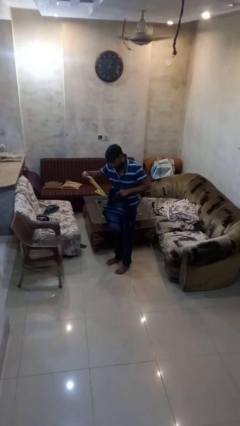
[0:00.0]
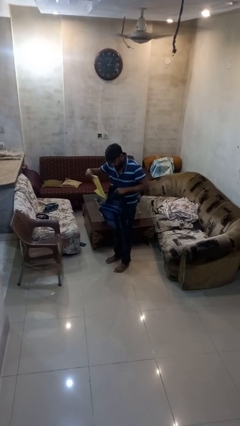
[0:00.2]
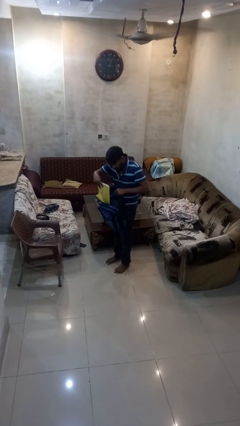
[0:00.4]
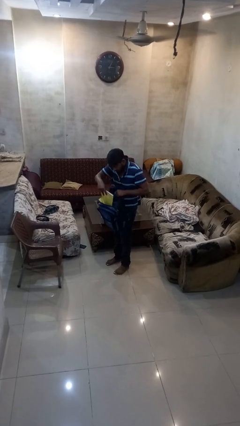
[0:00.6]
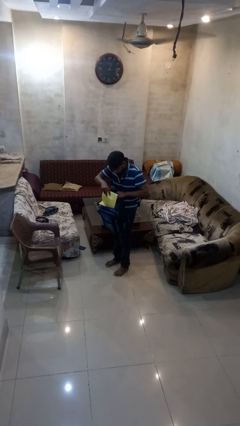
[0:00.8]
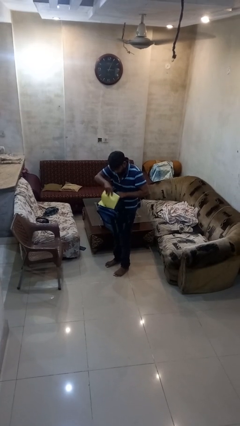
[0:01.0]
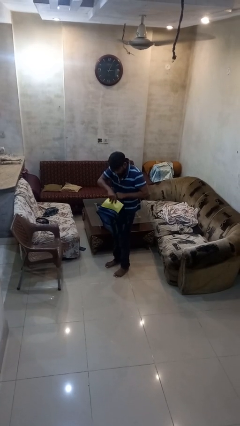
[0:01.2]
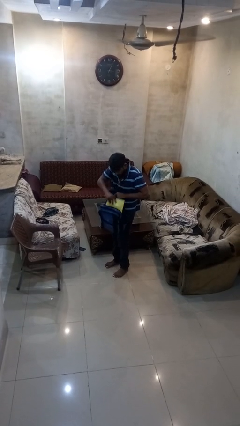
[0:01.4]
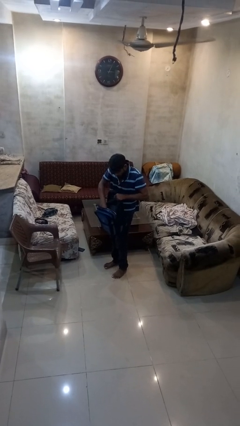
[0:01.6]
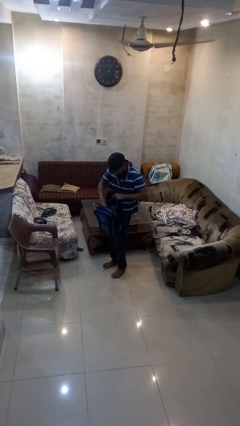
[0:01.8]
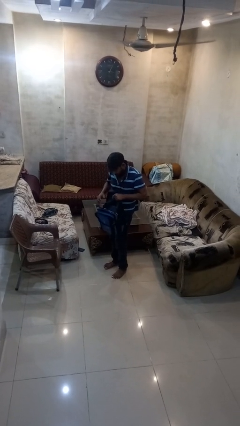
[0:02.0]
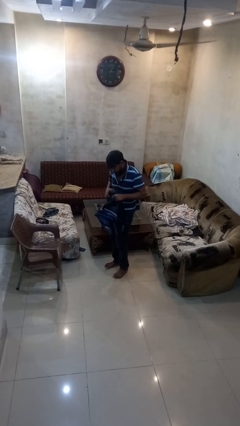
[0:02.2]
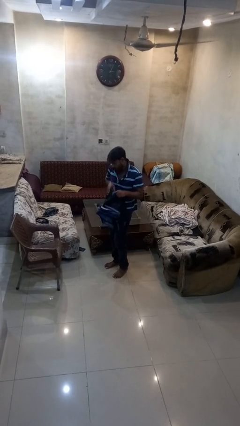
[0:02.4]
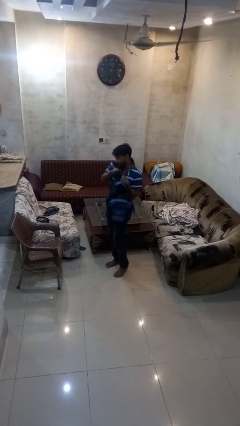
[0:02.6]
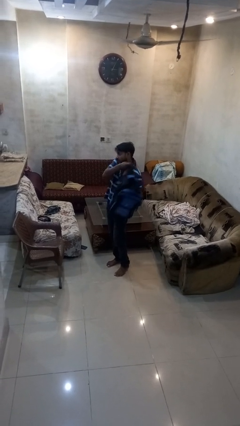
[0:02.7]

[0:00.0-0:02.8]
person puts object into backpack

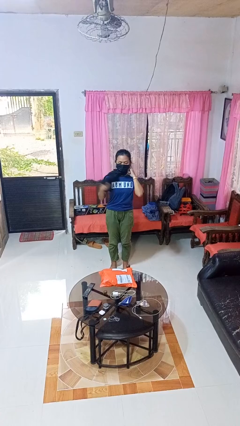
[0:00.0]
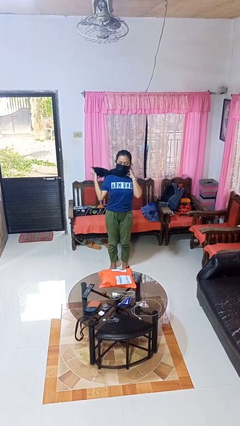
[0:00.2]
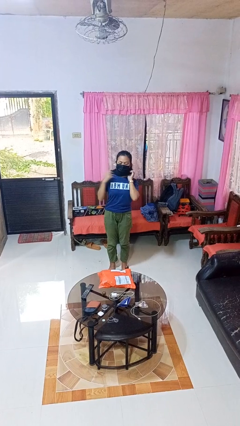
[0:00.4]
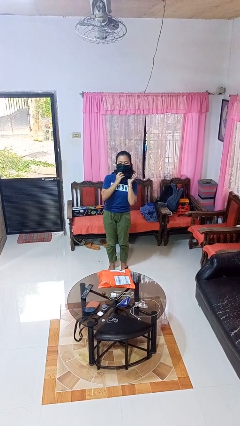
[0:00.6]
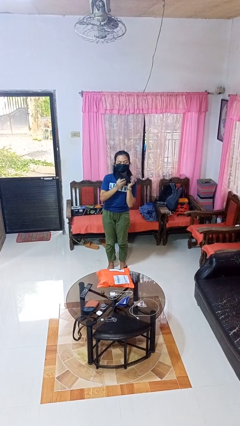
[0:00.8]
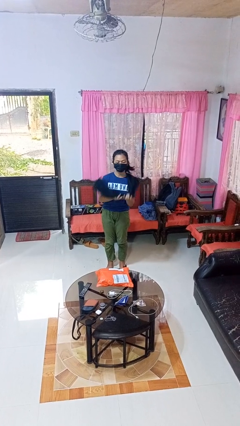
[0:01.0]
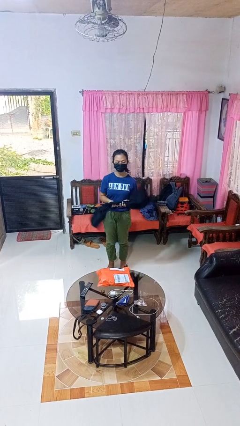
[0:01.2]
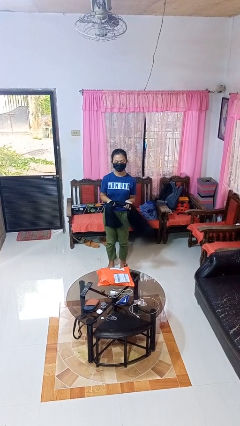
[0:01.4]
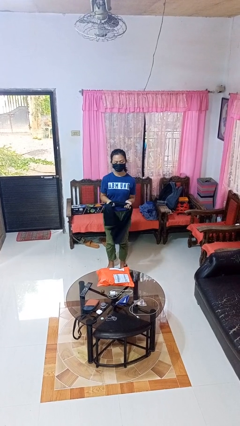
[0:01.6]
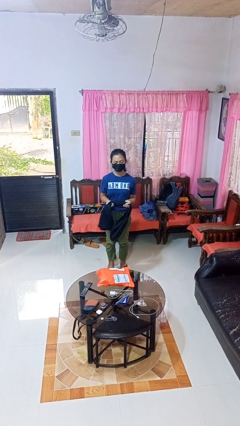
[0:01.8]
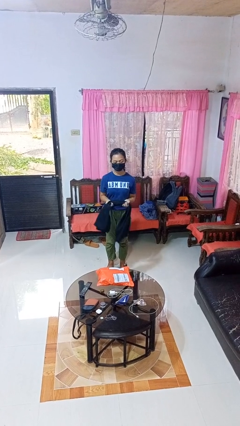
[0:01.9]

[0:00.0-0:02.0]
person takes off scarf

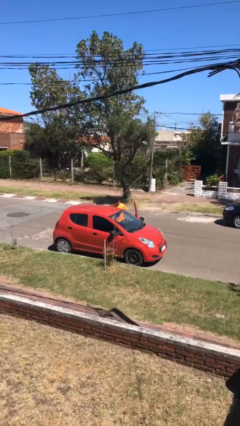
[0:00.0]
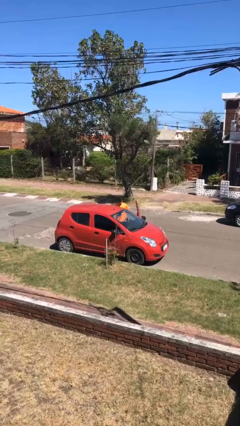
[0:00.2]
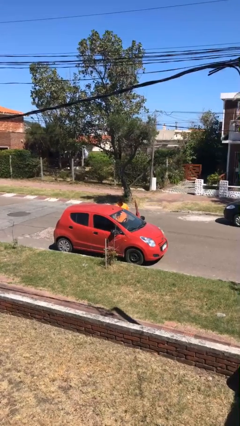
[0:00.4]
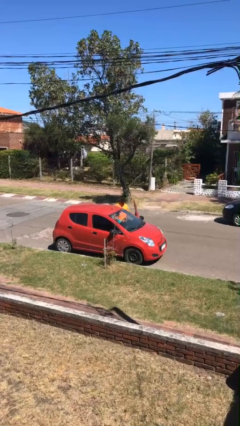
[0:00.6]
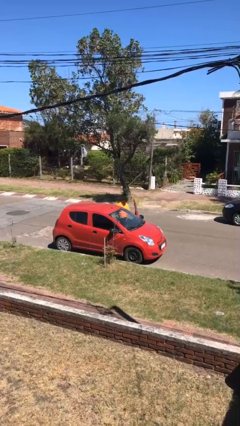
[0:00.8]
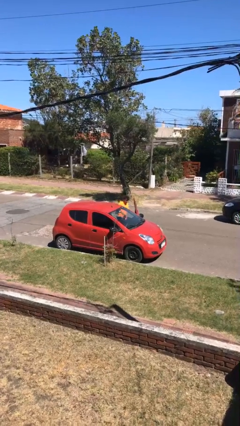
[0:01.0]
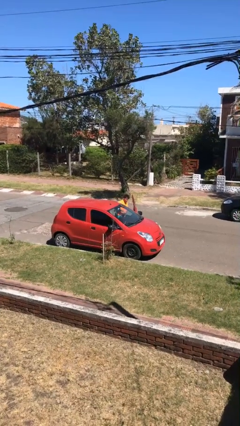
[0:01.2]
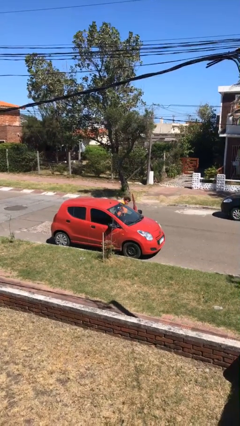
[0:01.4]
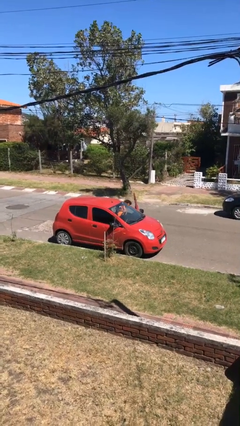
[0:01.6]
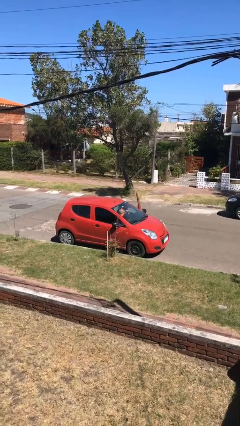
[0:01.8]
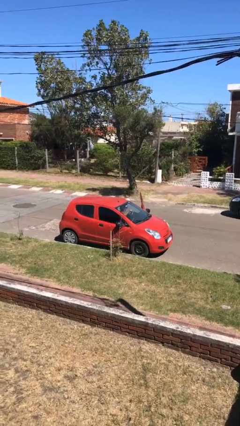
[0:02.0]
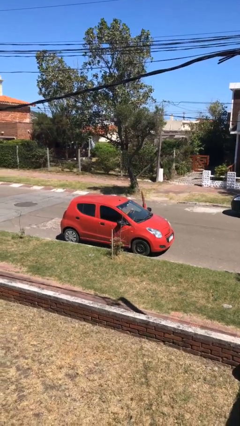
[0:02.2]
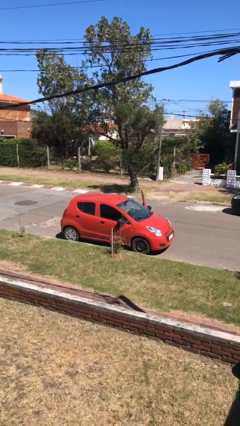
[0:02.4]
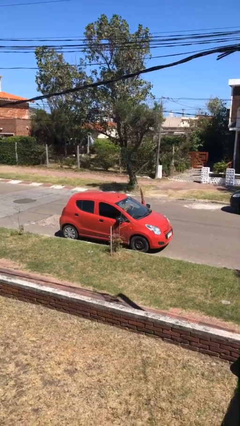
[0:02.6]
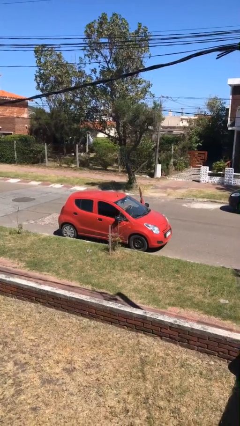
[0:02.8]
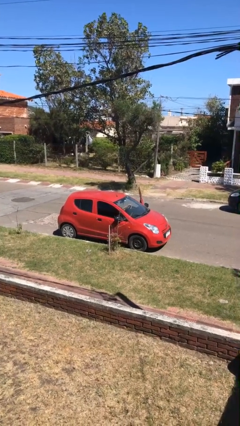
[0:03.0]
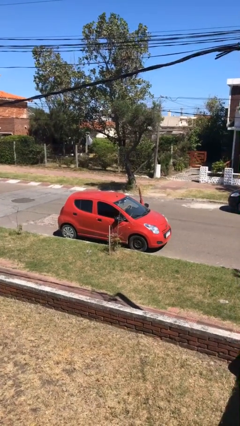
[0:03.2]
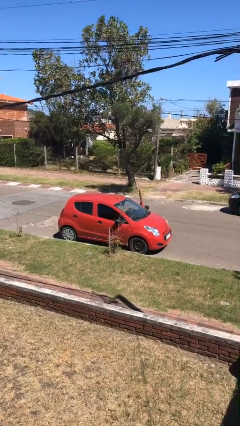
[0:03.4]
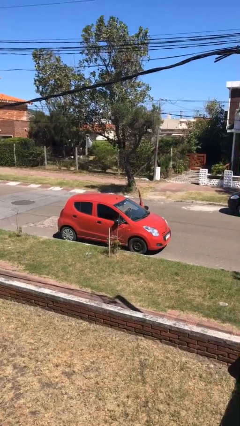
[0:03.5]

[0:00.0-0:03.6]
person enters car

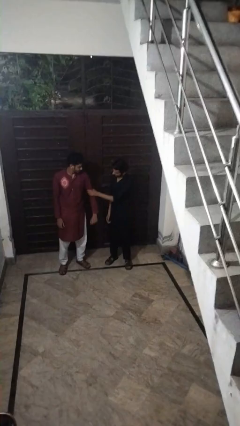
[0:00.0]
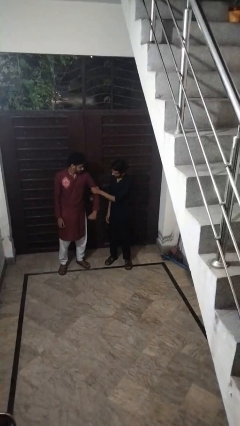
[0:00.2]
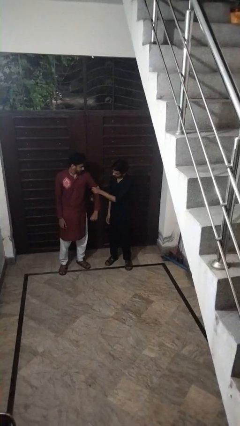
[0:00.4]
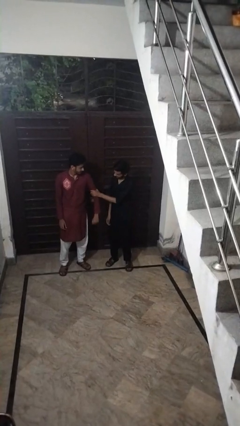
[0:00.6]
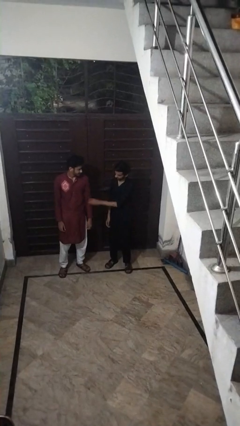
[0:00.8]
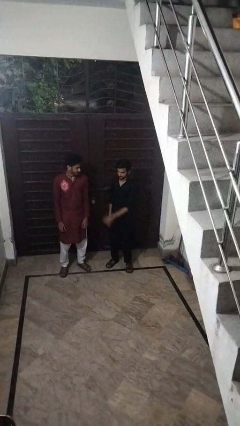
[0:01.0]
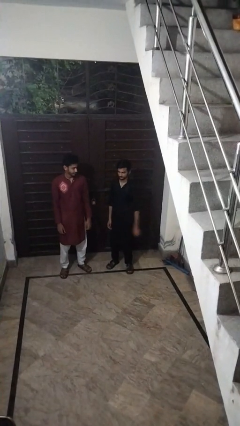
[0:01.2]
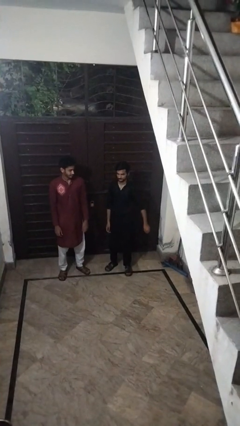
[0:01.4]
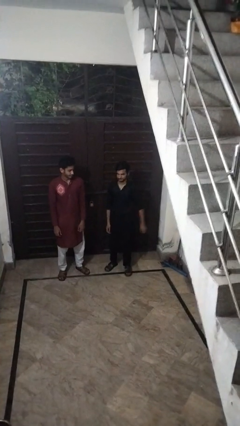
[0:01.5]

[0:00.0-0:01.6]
person grabs person by bicep

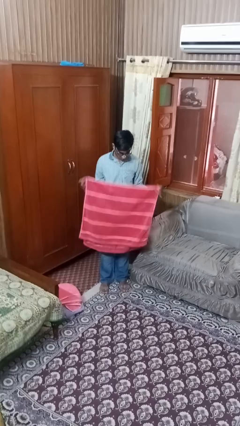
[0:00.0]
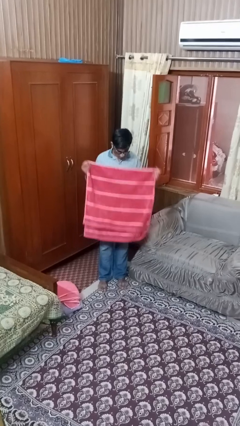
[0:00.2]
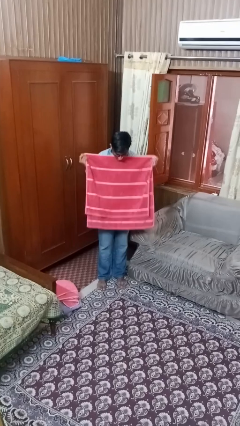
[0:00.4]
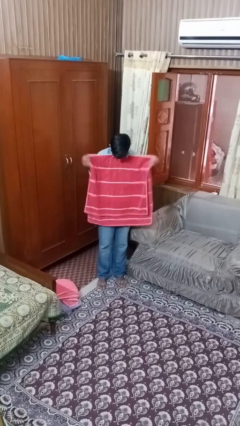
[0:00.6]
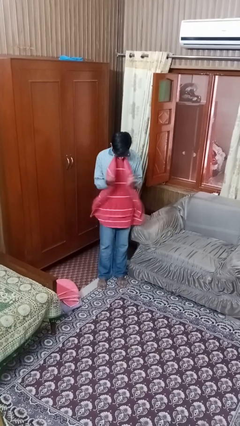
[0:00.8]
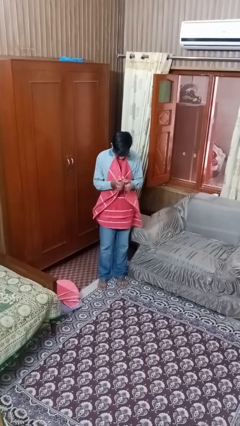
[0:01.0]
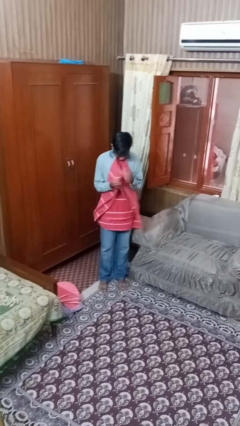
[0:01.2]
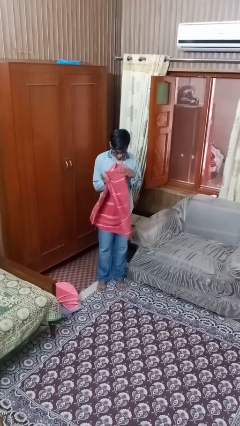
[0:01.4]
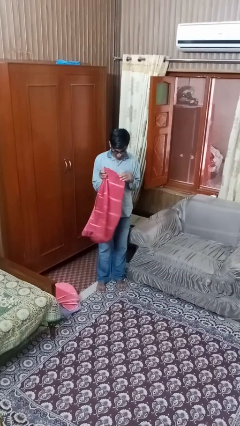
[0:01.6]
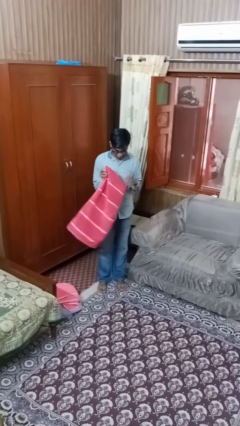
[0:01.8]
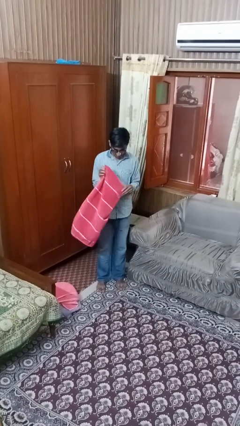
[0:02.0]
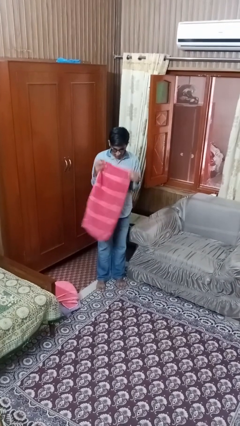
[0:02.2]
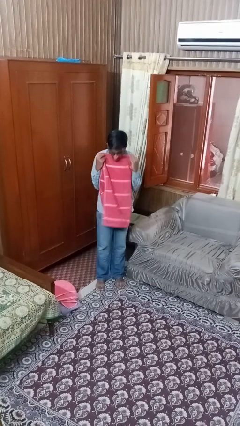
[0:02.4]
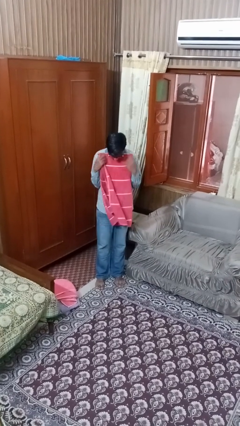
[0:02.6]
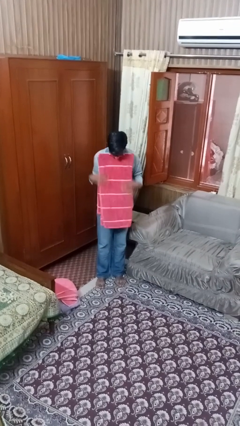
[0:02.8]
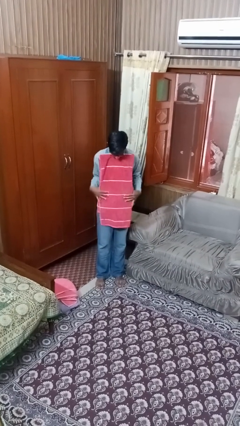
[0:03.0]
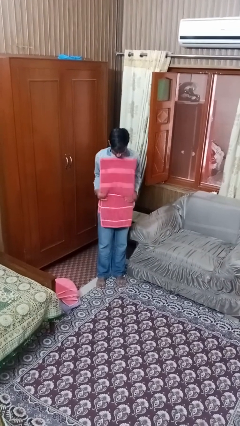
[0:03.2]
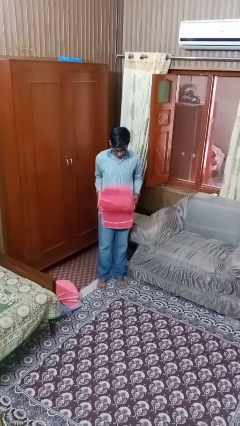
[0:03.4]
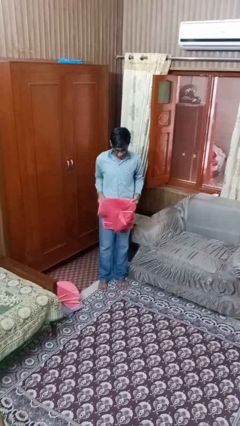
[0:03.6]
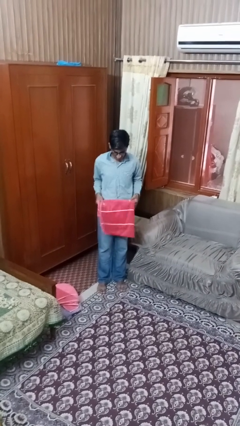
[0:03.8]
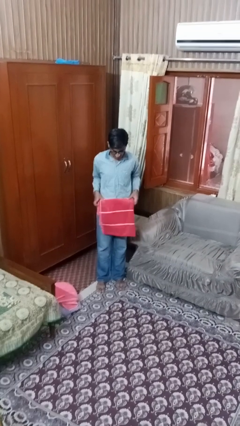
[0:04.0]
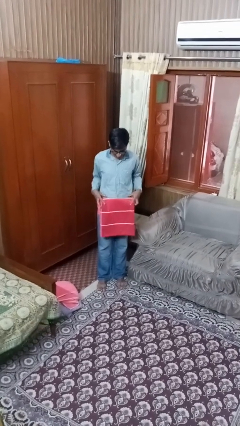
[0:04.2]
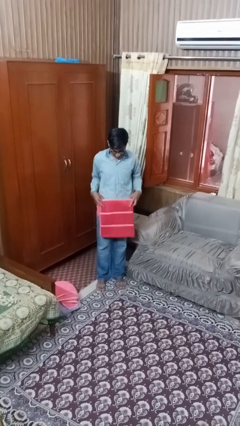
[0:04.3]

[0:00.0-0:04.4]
person folds towel

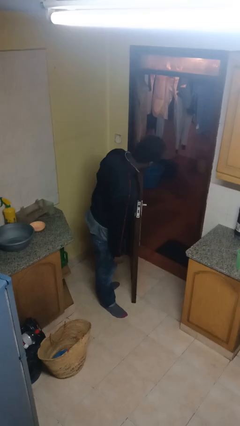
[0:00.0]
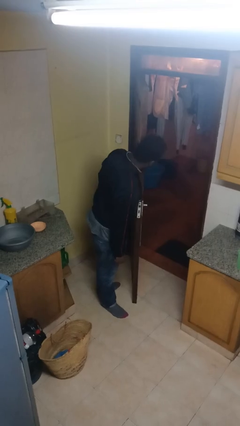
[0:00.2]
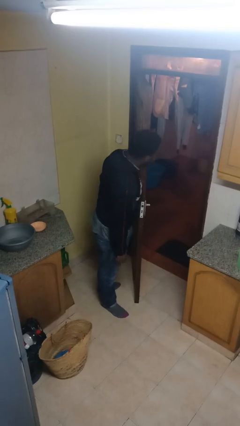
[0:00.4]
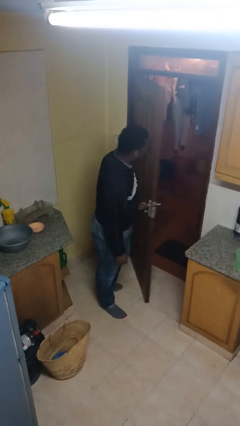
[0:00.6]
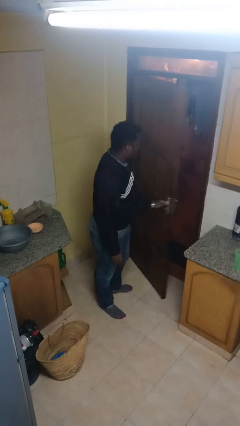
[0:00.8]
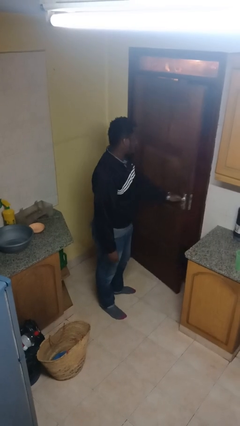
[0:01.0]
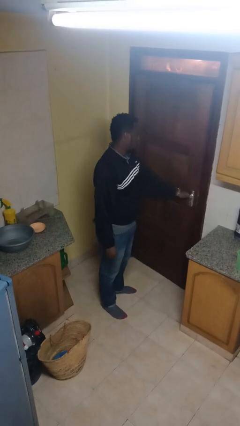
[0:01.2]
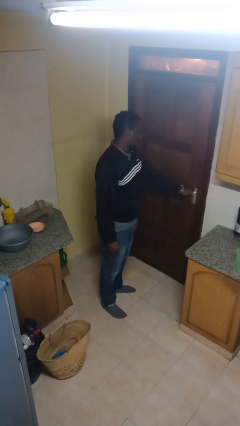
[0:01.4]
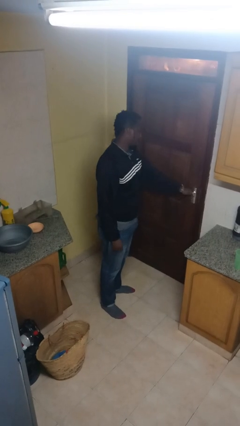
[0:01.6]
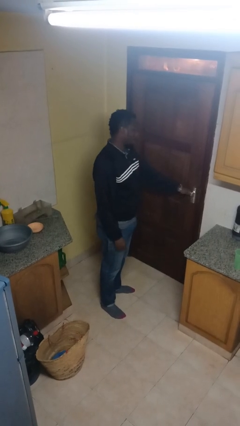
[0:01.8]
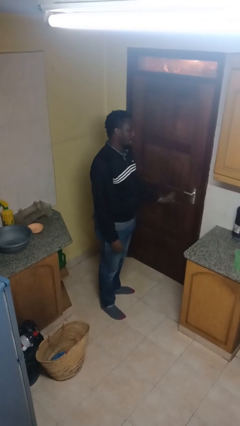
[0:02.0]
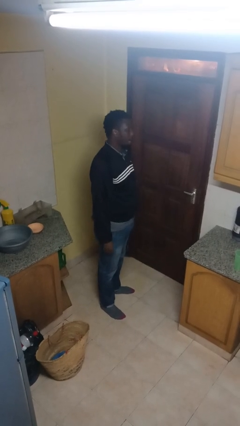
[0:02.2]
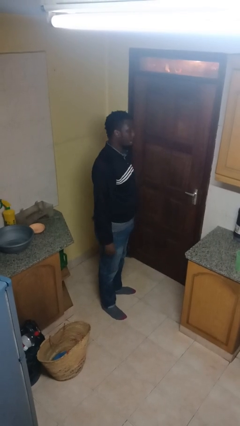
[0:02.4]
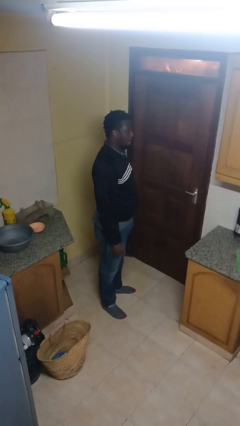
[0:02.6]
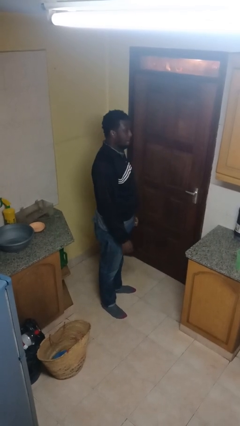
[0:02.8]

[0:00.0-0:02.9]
person closes facility door

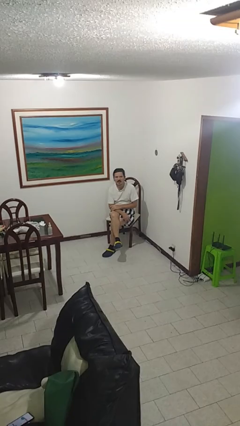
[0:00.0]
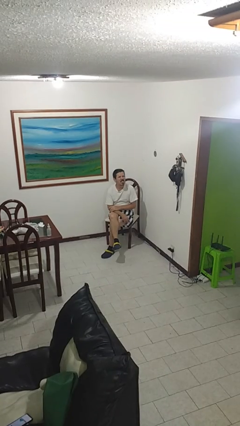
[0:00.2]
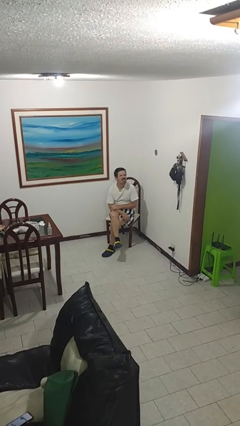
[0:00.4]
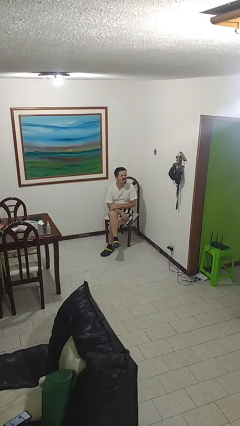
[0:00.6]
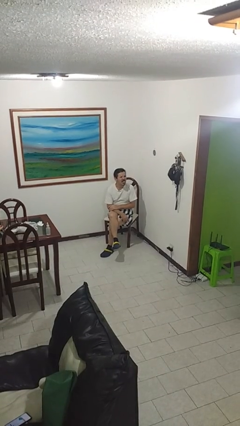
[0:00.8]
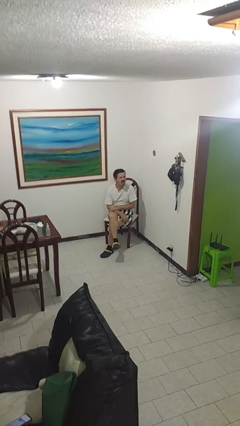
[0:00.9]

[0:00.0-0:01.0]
person sticks out tongue
